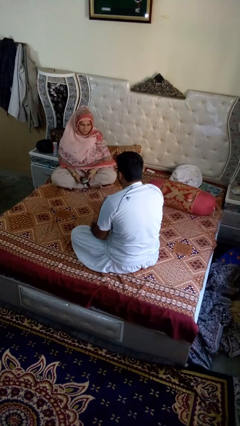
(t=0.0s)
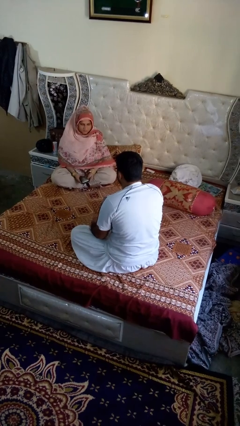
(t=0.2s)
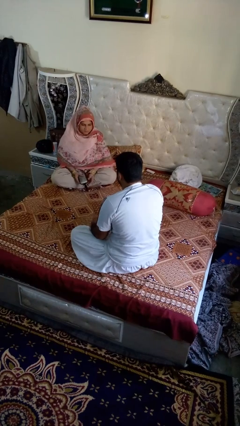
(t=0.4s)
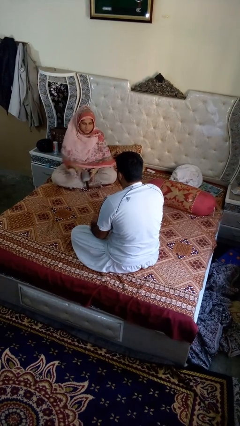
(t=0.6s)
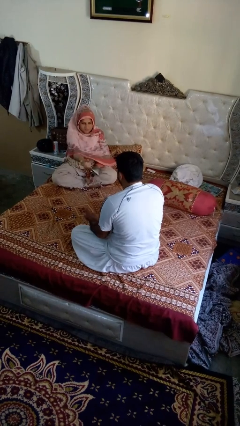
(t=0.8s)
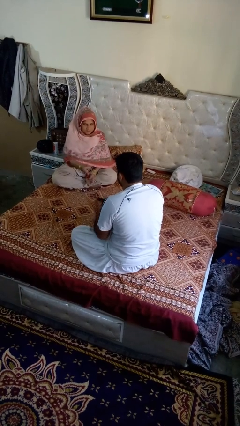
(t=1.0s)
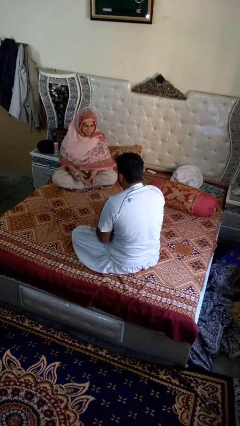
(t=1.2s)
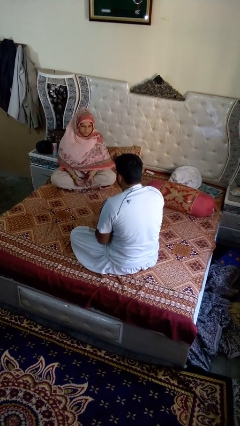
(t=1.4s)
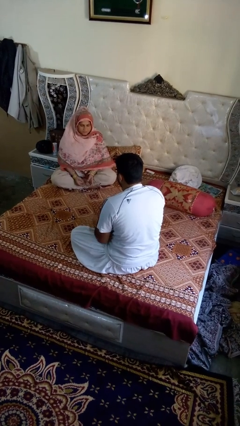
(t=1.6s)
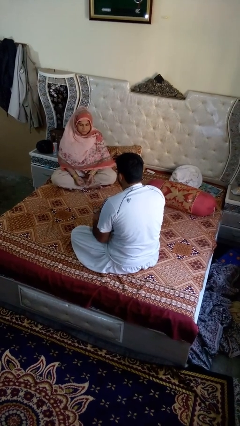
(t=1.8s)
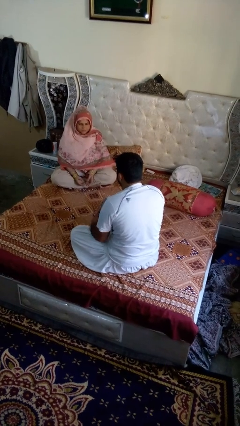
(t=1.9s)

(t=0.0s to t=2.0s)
person catches object from person

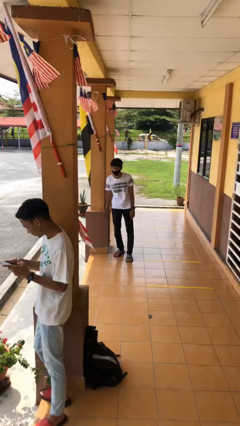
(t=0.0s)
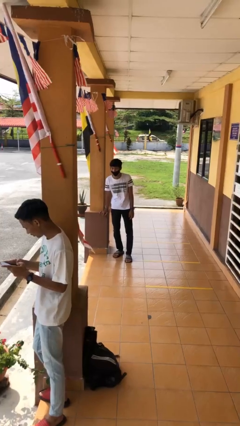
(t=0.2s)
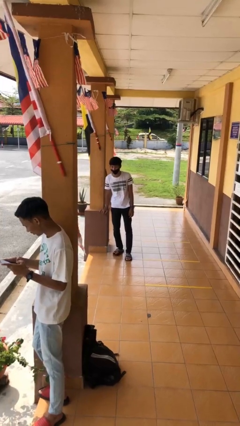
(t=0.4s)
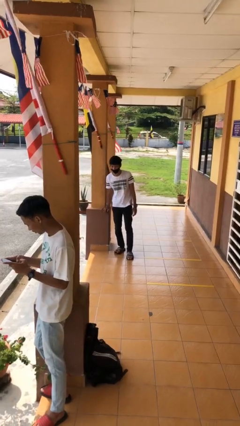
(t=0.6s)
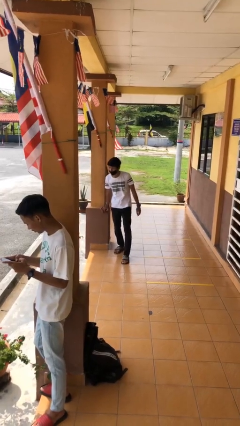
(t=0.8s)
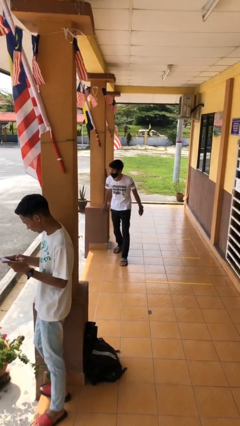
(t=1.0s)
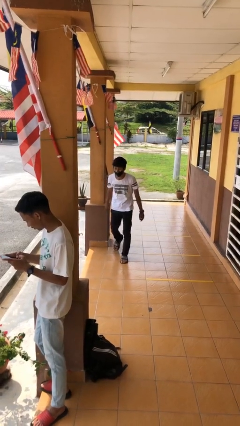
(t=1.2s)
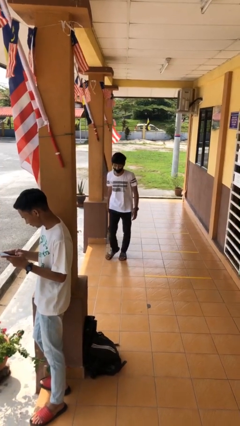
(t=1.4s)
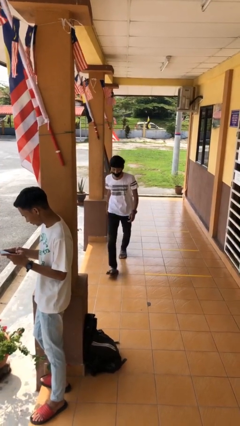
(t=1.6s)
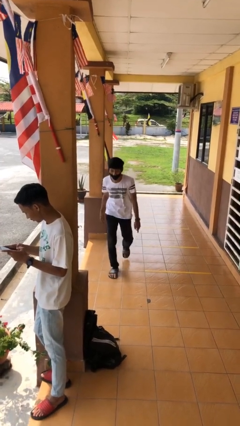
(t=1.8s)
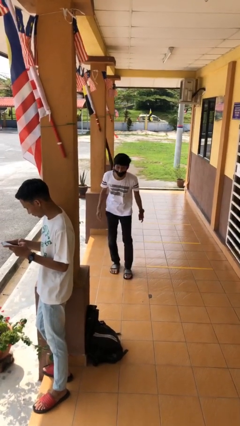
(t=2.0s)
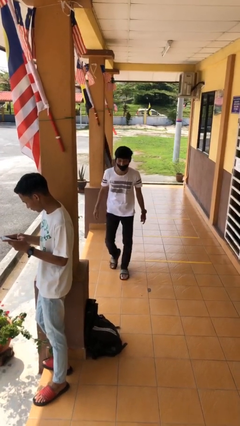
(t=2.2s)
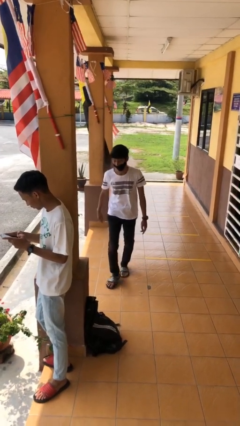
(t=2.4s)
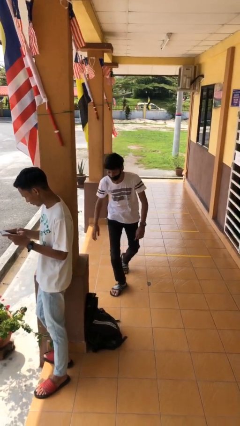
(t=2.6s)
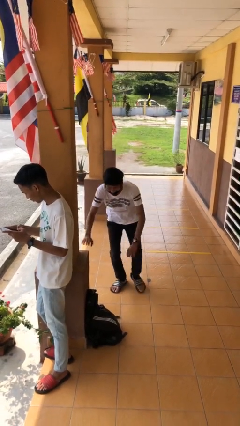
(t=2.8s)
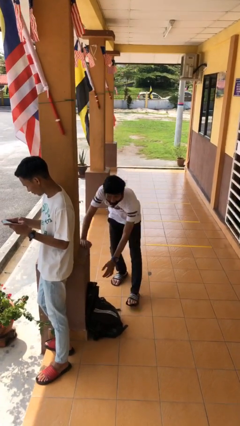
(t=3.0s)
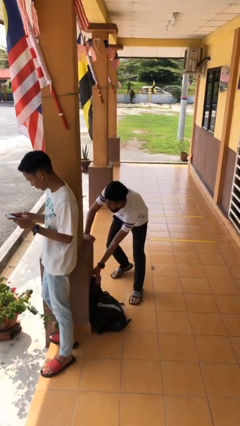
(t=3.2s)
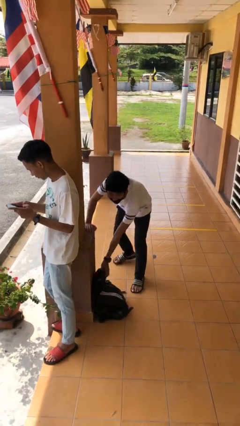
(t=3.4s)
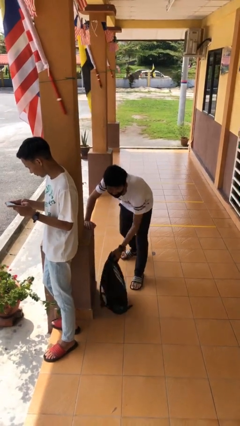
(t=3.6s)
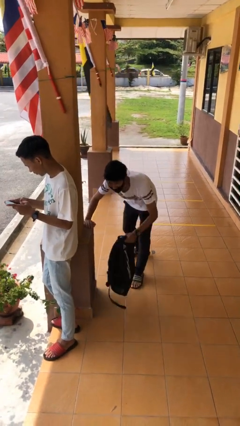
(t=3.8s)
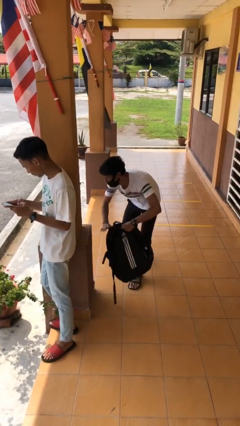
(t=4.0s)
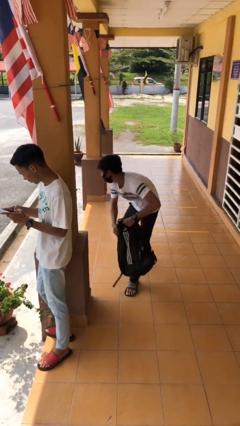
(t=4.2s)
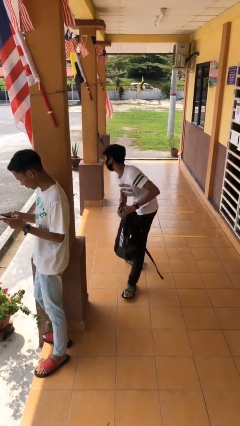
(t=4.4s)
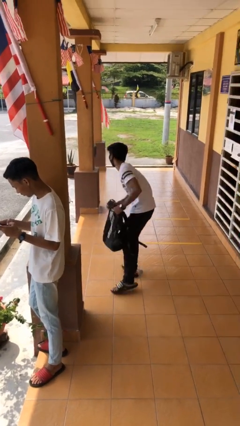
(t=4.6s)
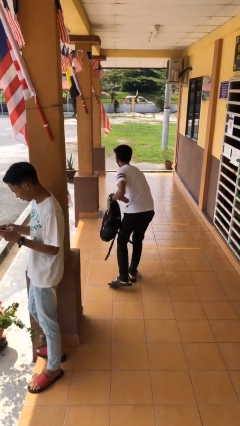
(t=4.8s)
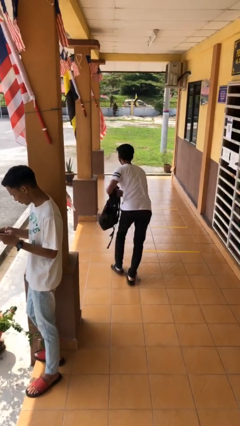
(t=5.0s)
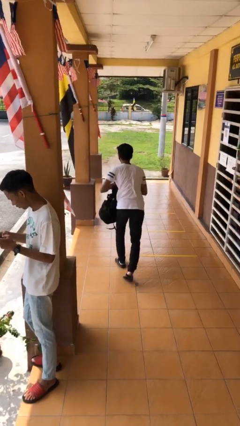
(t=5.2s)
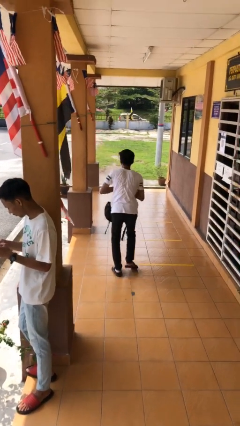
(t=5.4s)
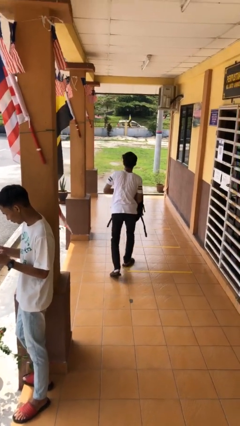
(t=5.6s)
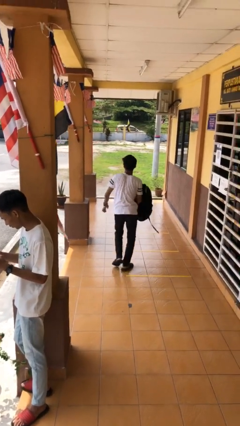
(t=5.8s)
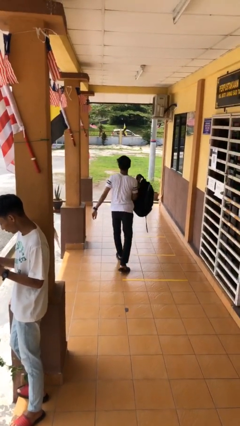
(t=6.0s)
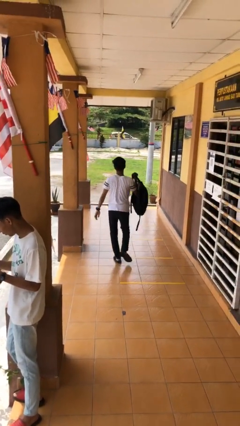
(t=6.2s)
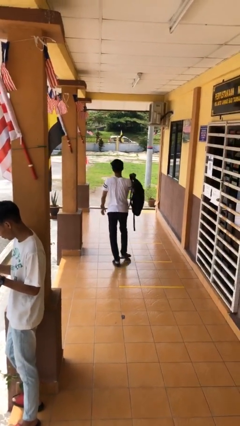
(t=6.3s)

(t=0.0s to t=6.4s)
person steals object from person

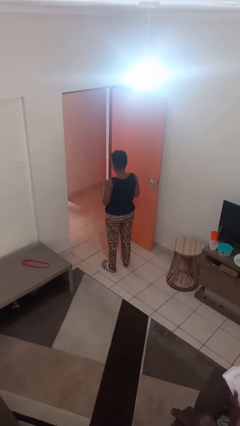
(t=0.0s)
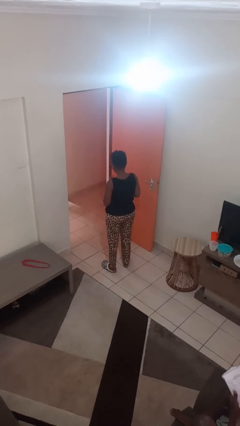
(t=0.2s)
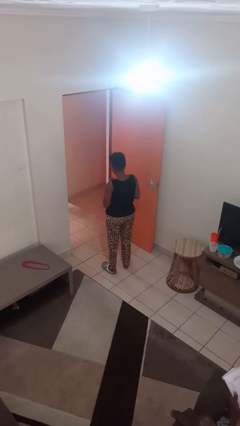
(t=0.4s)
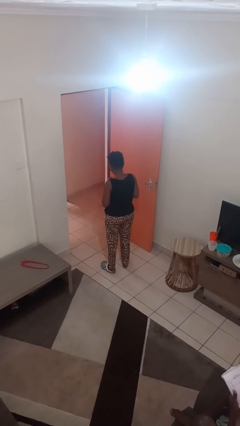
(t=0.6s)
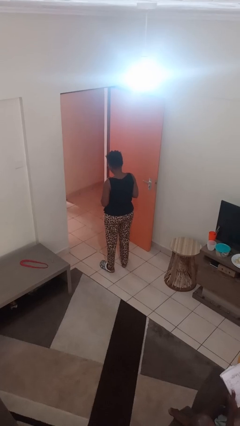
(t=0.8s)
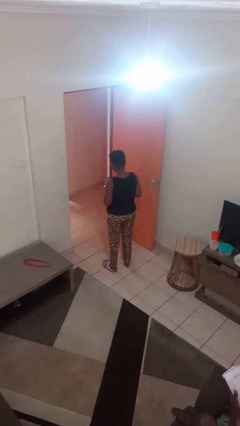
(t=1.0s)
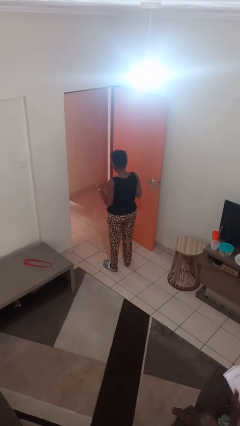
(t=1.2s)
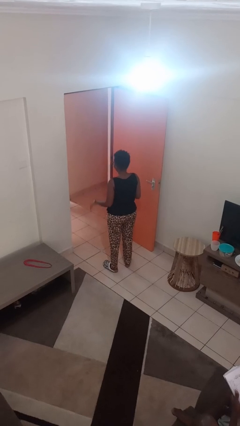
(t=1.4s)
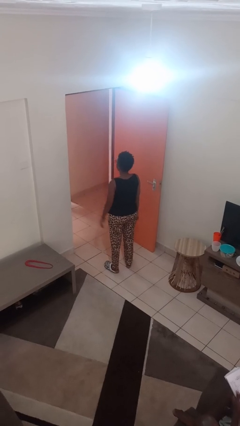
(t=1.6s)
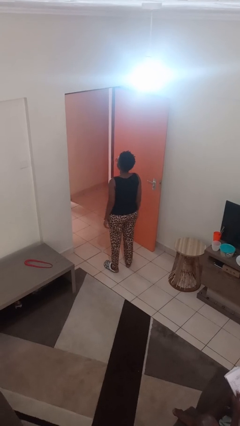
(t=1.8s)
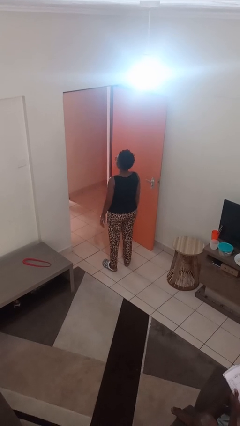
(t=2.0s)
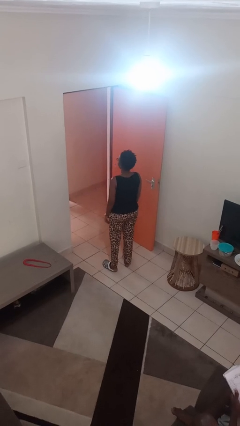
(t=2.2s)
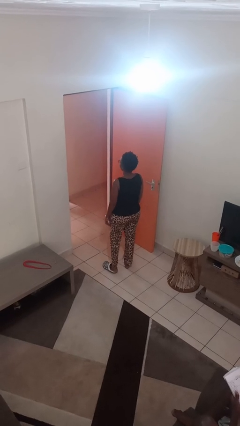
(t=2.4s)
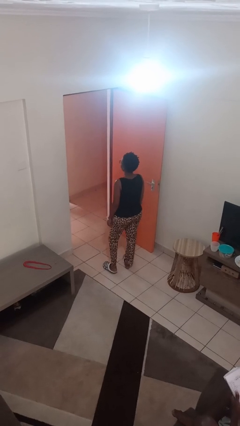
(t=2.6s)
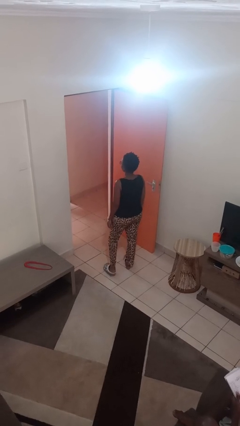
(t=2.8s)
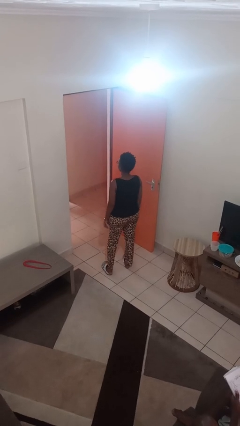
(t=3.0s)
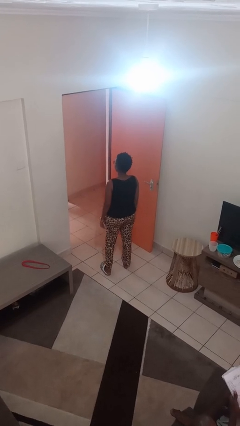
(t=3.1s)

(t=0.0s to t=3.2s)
person takes off ring

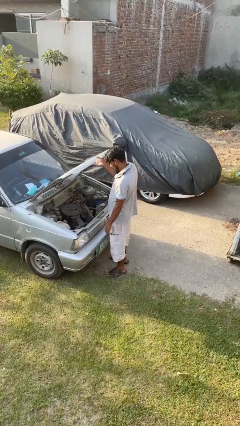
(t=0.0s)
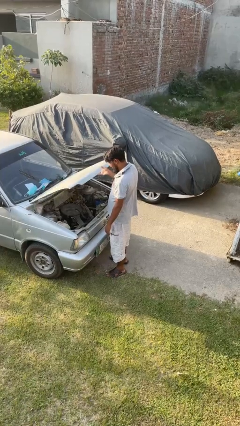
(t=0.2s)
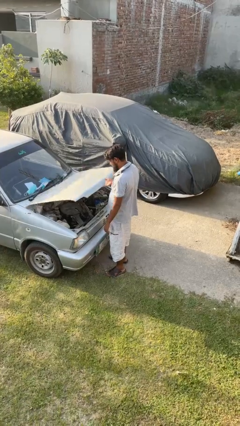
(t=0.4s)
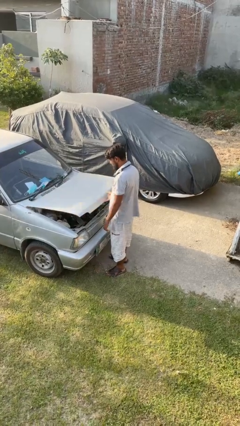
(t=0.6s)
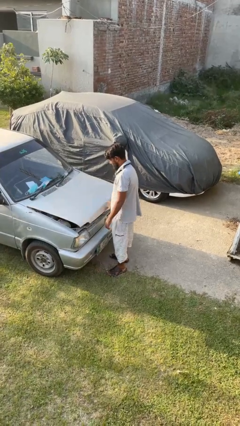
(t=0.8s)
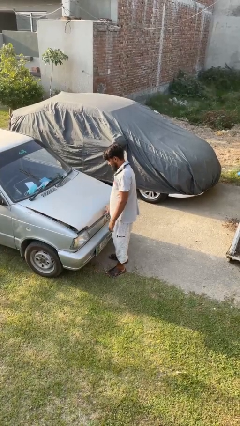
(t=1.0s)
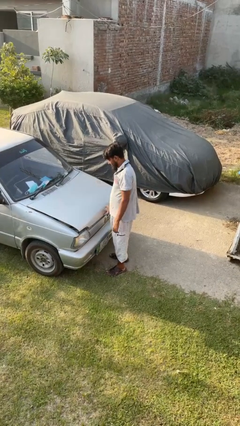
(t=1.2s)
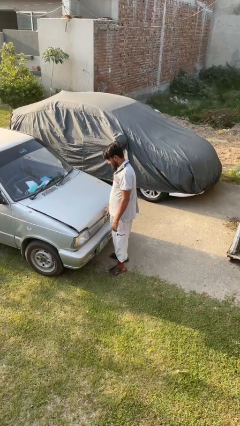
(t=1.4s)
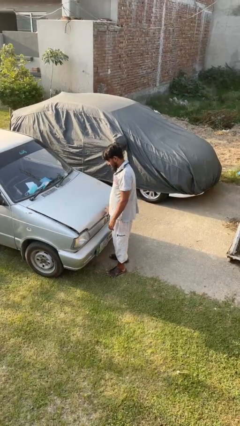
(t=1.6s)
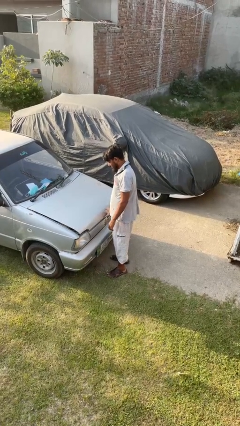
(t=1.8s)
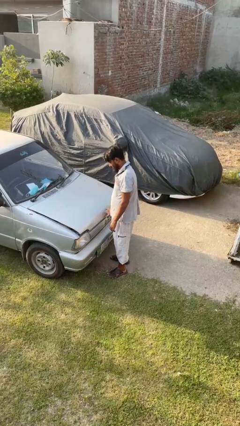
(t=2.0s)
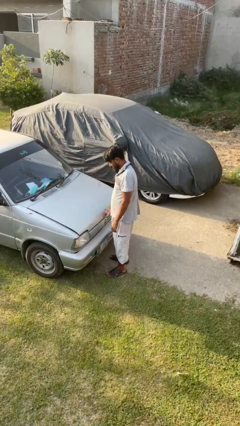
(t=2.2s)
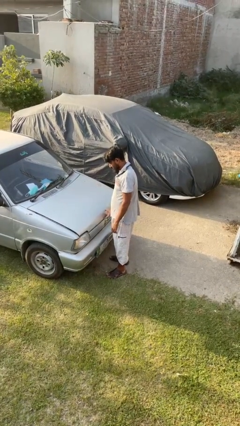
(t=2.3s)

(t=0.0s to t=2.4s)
person closes car hood

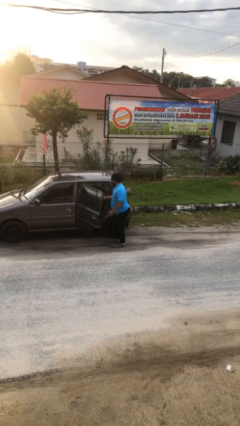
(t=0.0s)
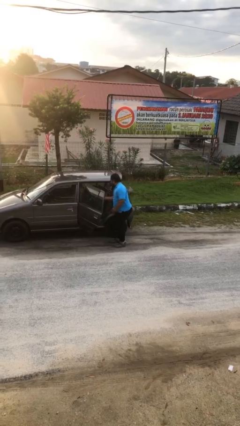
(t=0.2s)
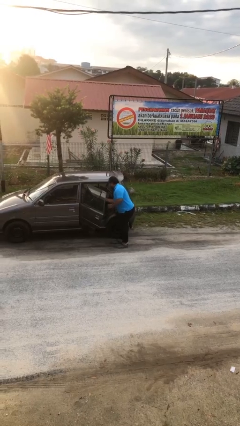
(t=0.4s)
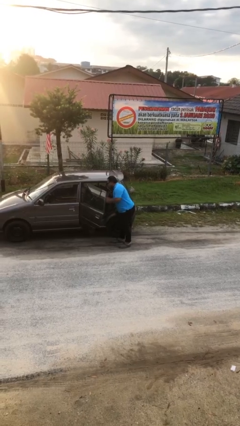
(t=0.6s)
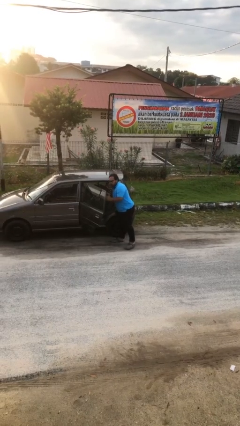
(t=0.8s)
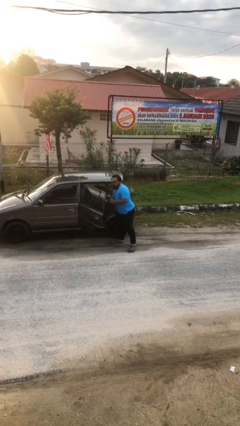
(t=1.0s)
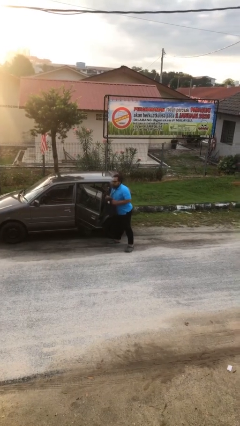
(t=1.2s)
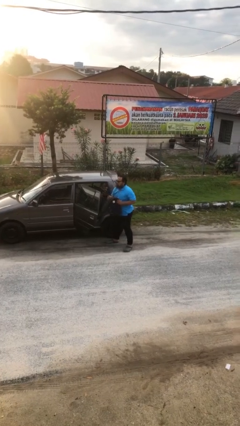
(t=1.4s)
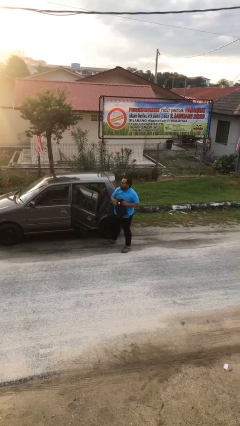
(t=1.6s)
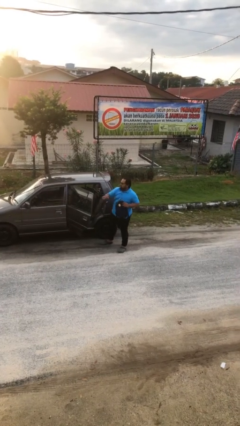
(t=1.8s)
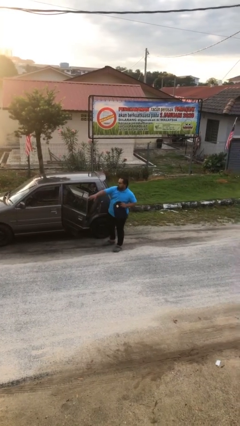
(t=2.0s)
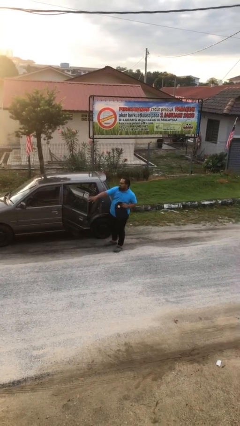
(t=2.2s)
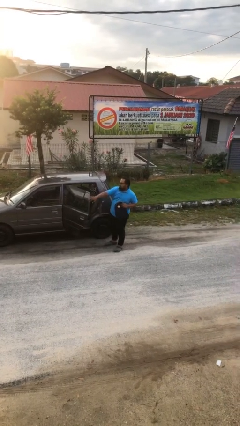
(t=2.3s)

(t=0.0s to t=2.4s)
person unloads car

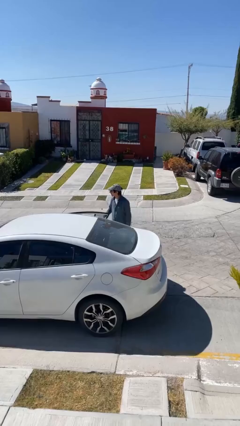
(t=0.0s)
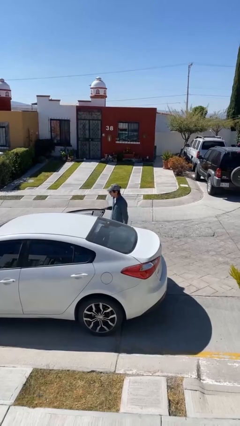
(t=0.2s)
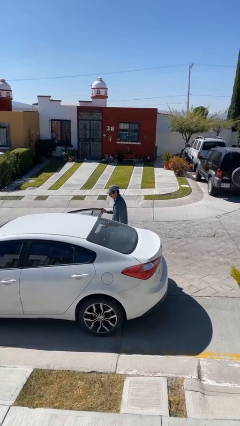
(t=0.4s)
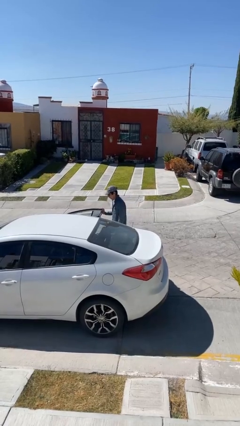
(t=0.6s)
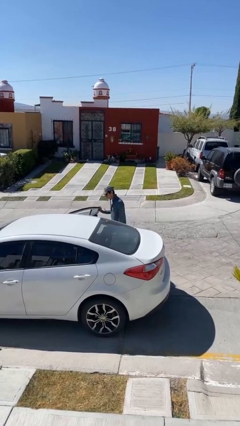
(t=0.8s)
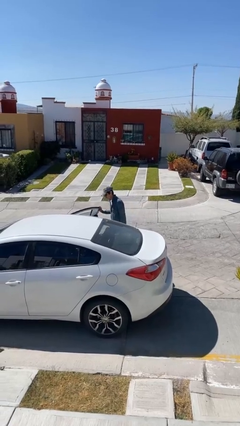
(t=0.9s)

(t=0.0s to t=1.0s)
person opens car door

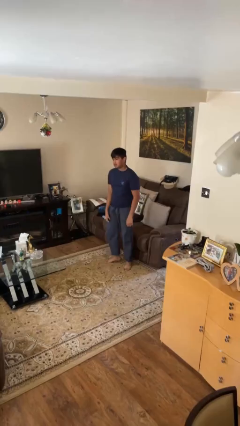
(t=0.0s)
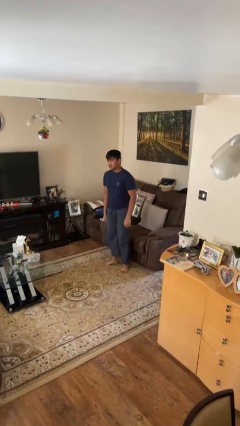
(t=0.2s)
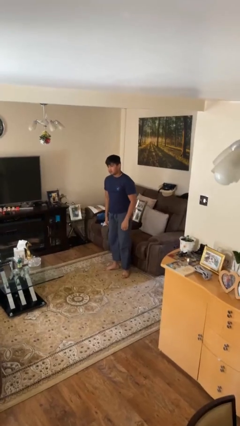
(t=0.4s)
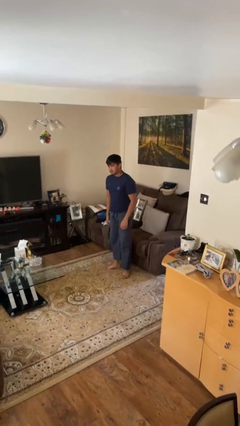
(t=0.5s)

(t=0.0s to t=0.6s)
person sits down
